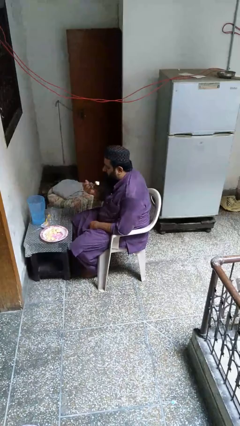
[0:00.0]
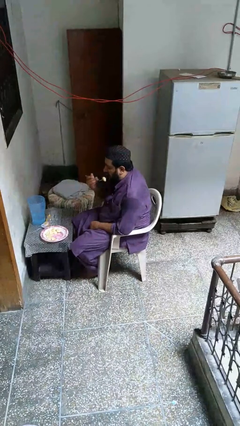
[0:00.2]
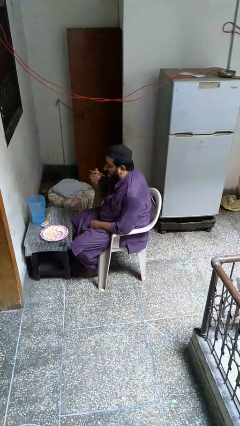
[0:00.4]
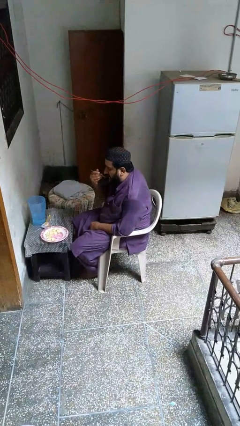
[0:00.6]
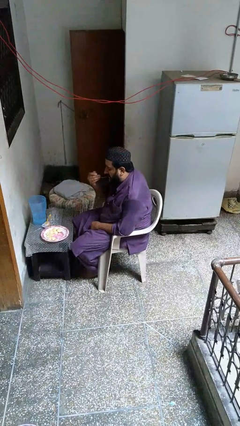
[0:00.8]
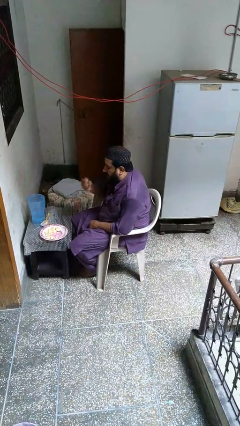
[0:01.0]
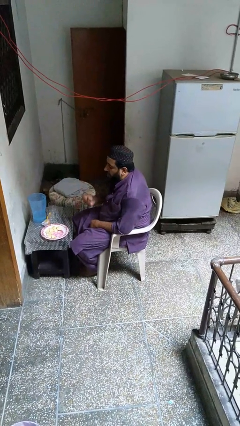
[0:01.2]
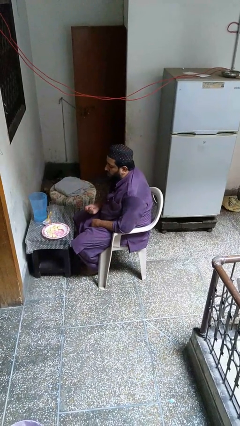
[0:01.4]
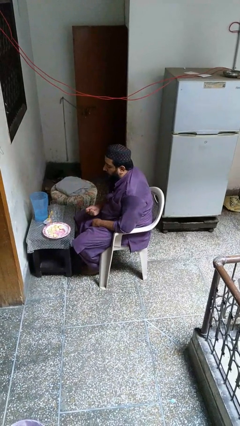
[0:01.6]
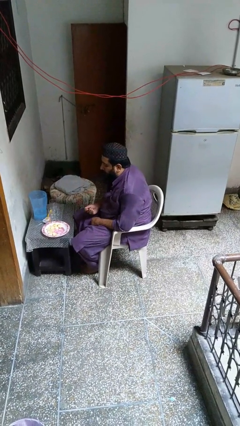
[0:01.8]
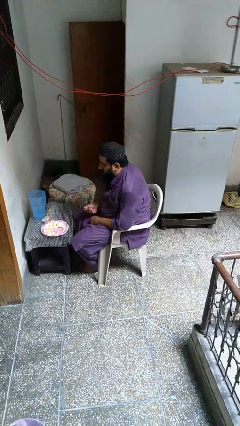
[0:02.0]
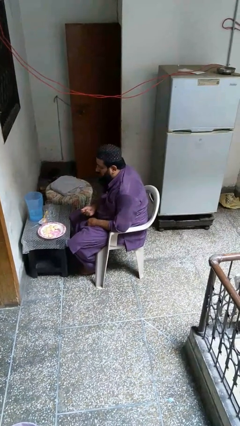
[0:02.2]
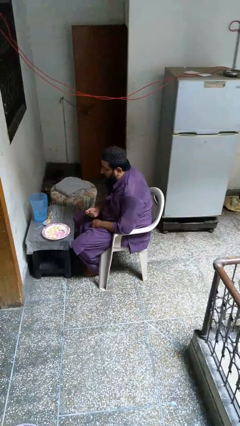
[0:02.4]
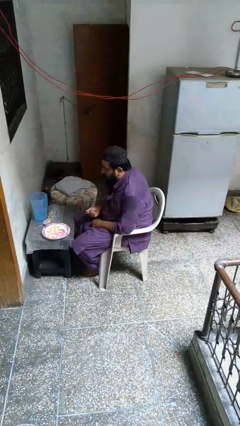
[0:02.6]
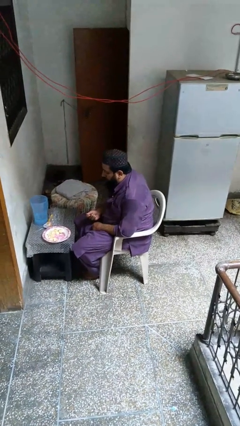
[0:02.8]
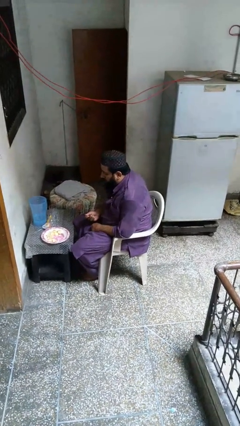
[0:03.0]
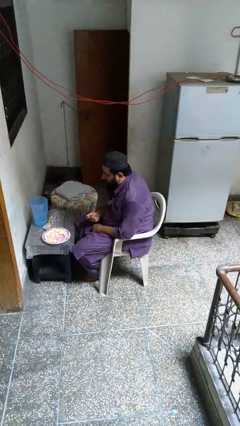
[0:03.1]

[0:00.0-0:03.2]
person eats with utensil

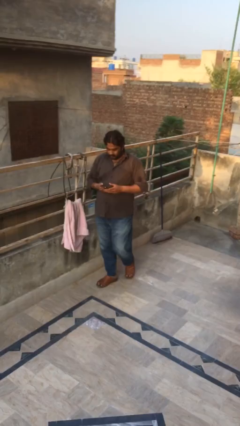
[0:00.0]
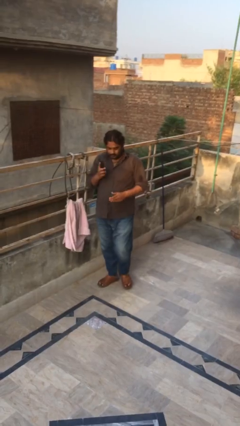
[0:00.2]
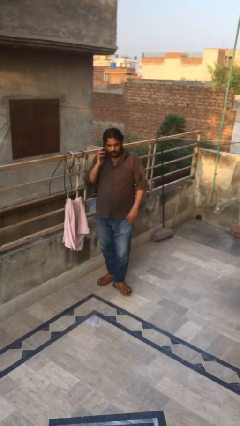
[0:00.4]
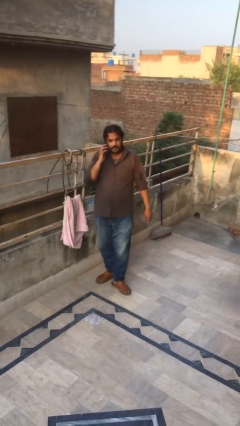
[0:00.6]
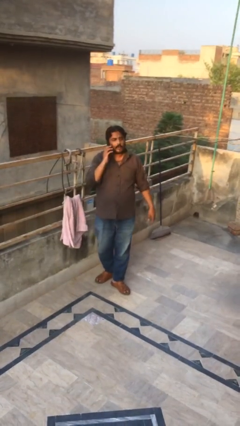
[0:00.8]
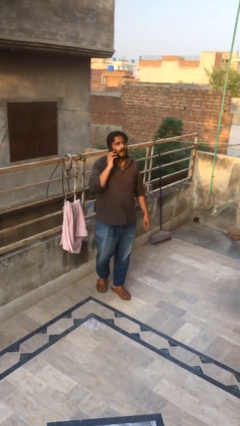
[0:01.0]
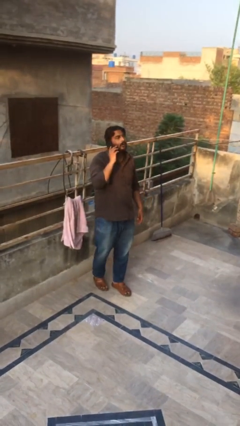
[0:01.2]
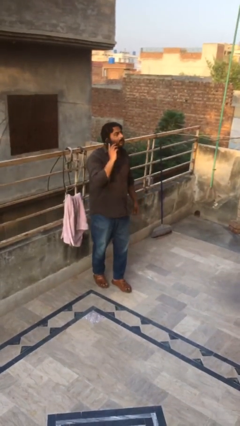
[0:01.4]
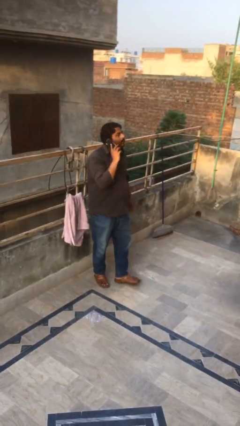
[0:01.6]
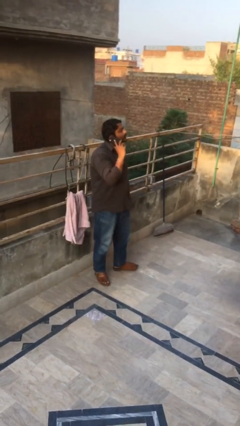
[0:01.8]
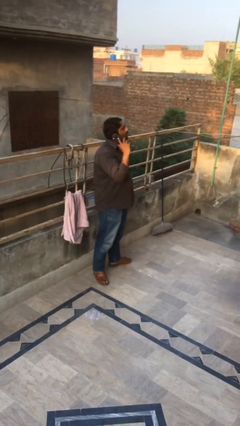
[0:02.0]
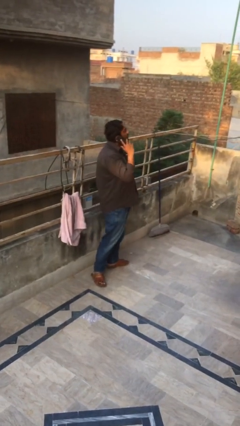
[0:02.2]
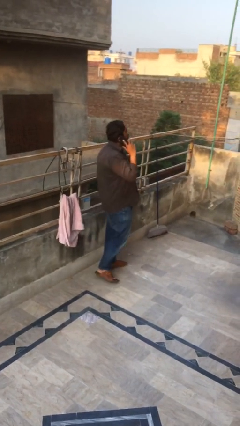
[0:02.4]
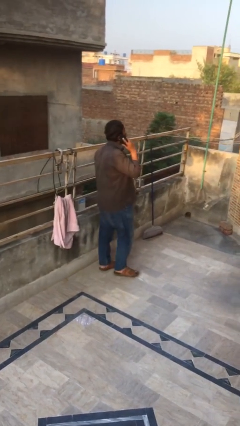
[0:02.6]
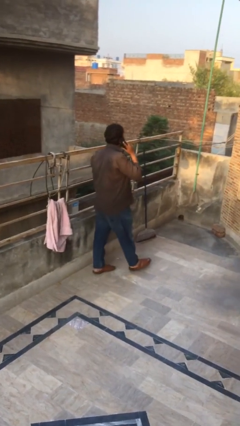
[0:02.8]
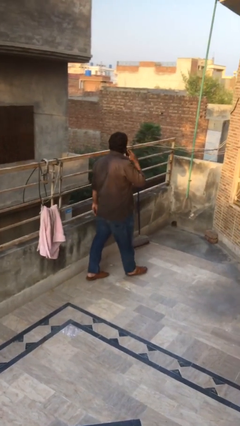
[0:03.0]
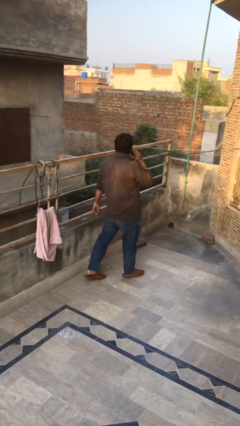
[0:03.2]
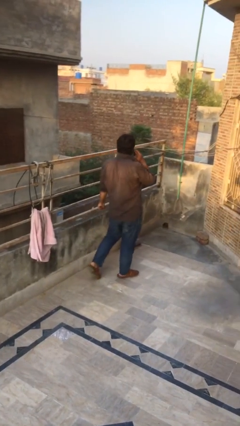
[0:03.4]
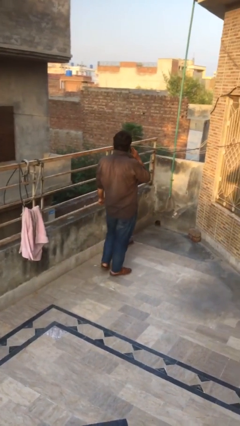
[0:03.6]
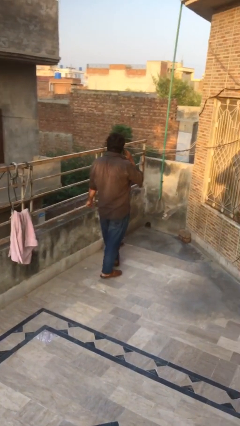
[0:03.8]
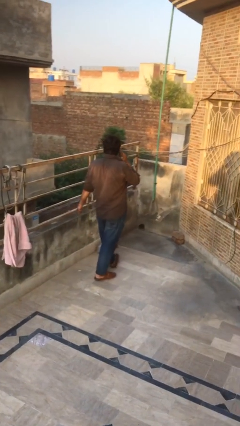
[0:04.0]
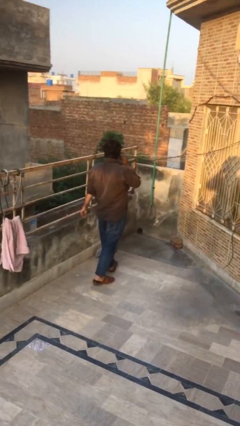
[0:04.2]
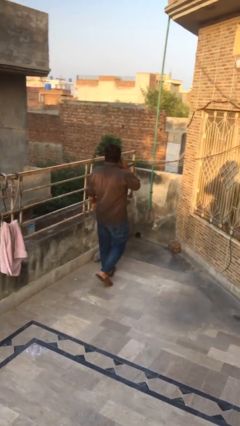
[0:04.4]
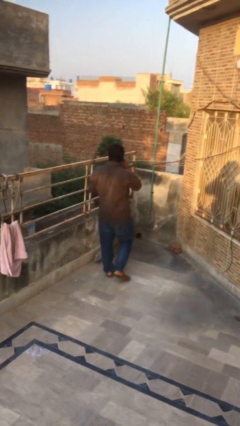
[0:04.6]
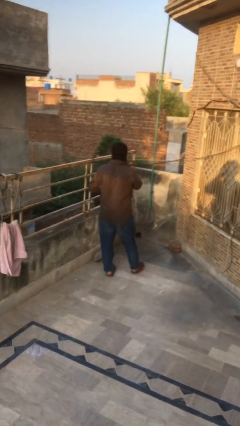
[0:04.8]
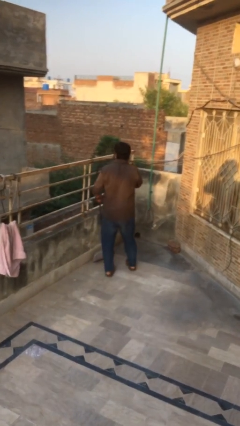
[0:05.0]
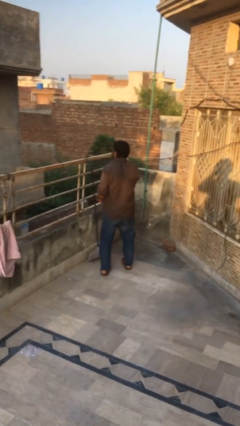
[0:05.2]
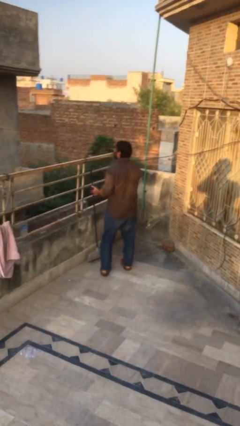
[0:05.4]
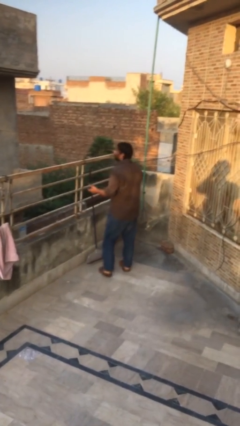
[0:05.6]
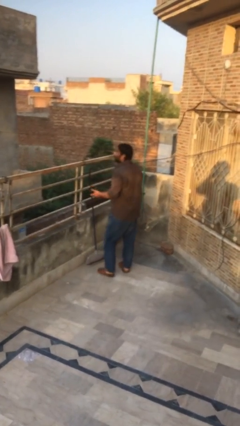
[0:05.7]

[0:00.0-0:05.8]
person talks on phone

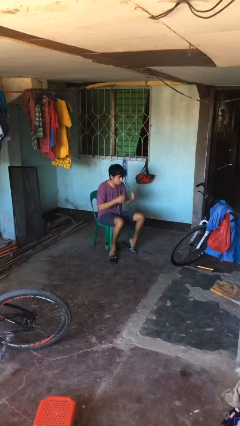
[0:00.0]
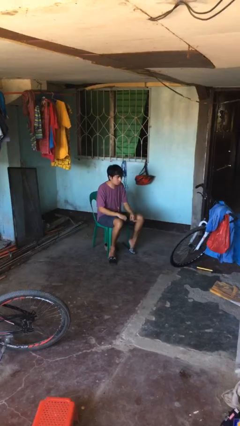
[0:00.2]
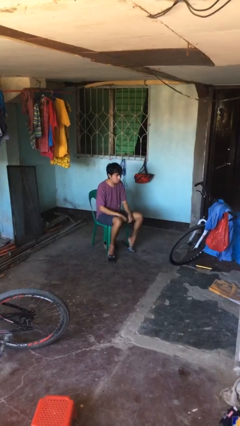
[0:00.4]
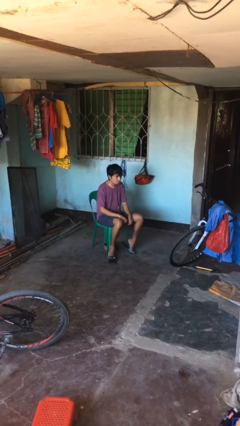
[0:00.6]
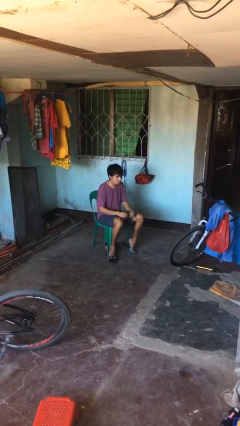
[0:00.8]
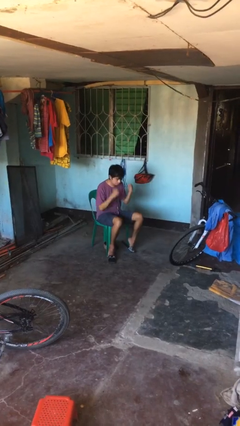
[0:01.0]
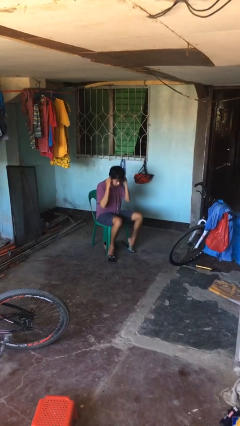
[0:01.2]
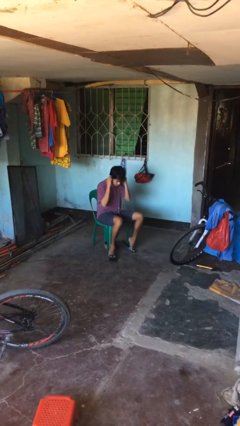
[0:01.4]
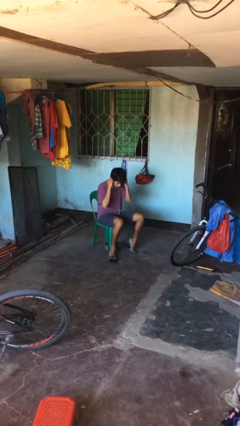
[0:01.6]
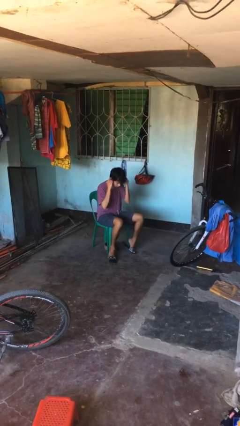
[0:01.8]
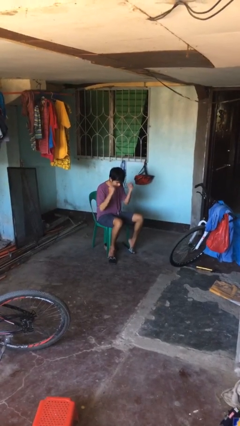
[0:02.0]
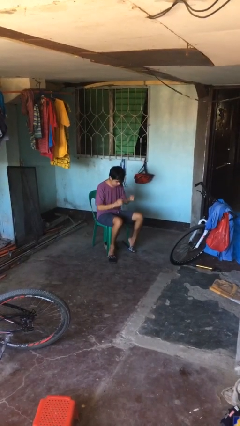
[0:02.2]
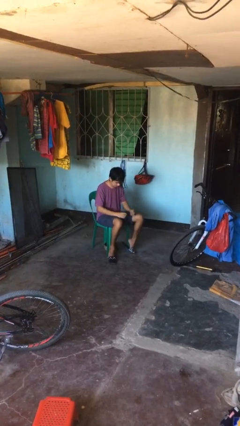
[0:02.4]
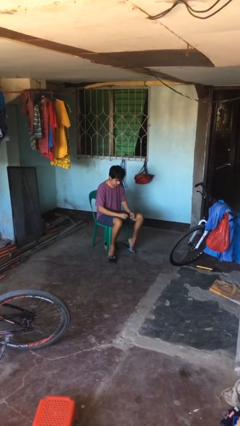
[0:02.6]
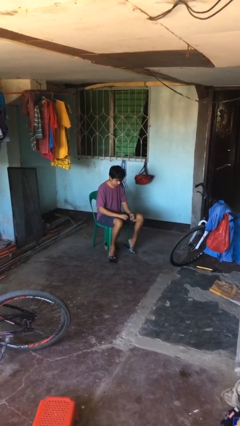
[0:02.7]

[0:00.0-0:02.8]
person takes off headphones

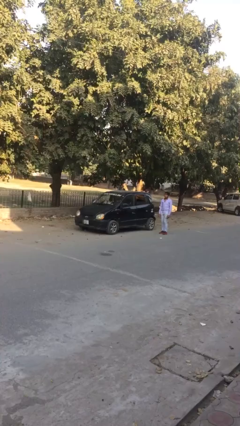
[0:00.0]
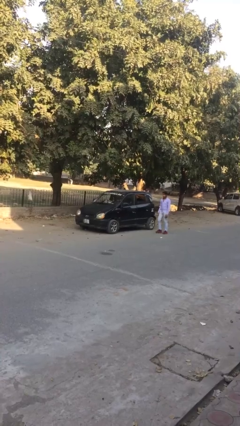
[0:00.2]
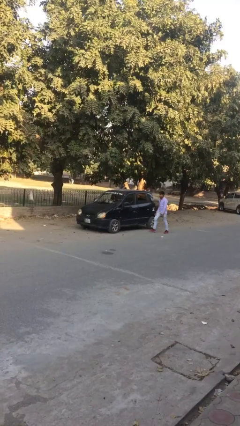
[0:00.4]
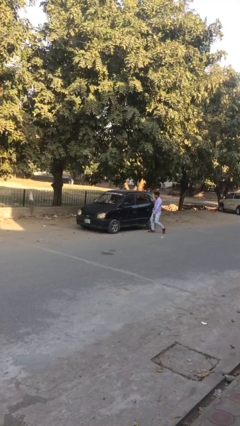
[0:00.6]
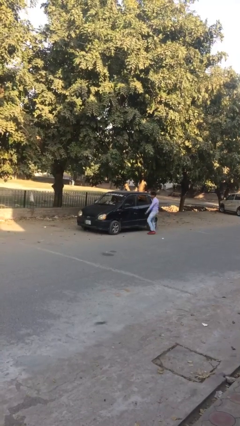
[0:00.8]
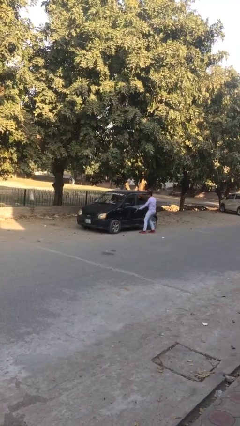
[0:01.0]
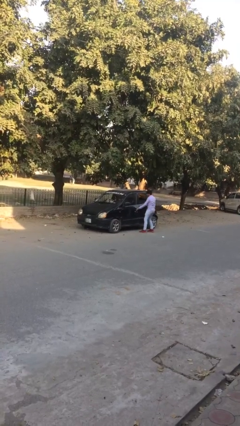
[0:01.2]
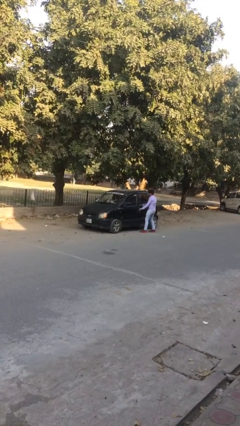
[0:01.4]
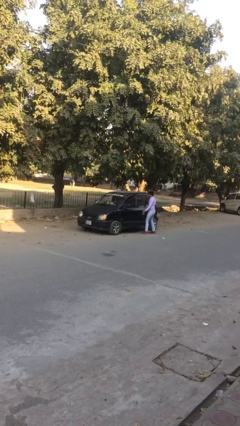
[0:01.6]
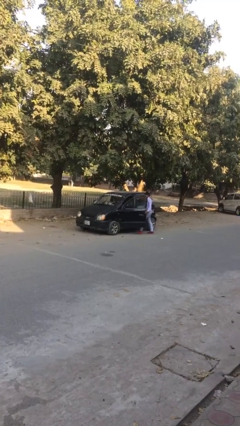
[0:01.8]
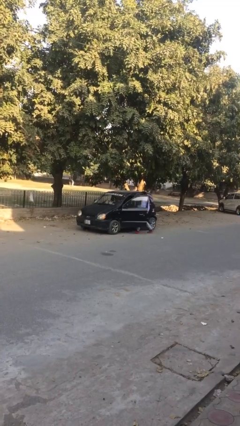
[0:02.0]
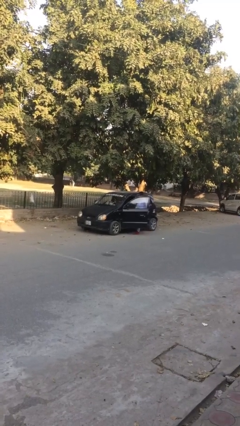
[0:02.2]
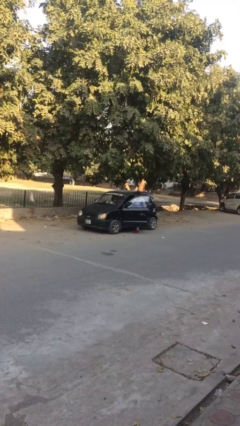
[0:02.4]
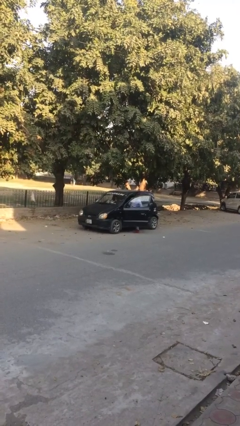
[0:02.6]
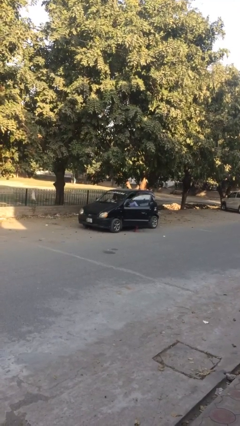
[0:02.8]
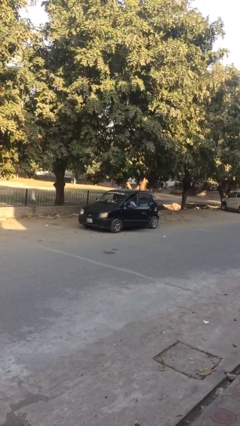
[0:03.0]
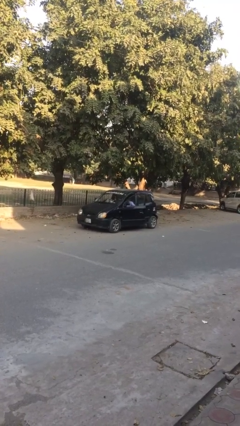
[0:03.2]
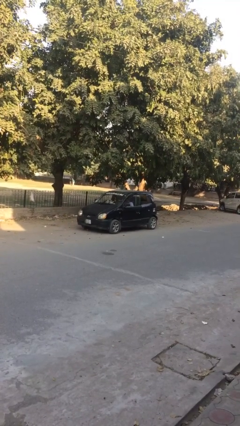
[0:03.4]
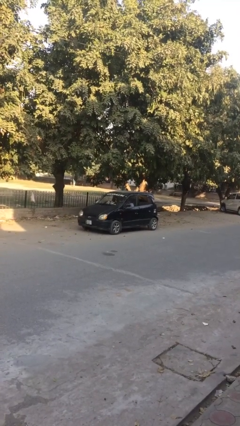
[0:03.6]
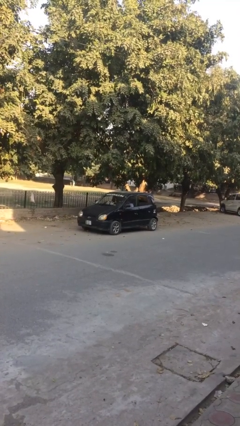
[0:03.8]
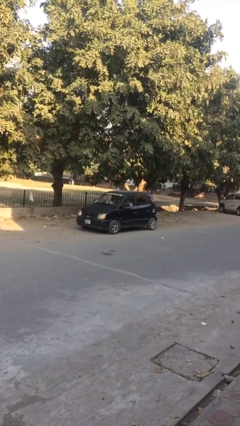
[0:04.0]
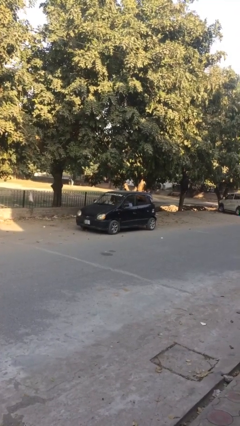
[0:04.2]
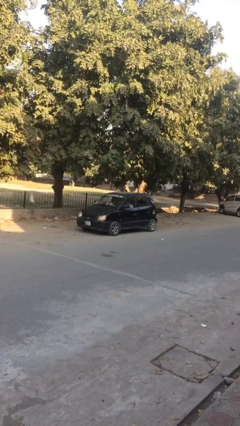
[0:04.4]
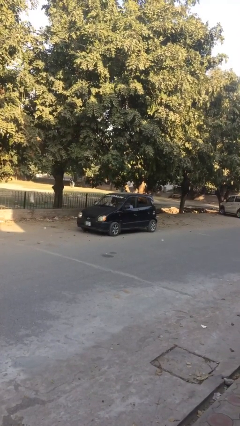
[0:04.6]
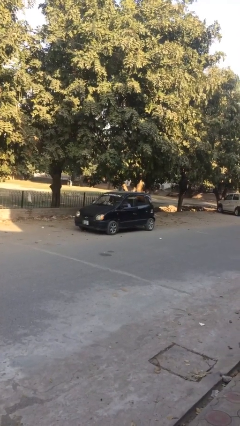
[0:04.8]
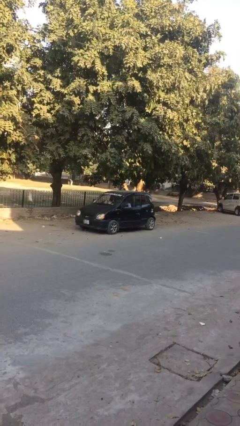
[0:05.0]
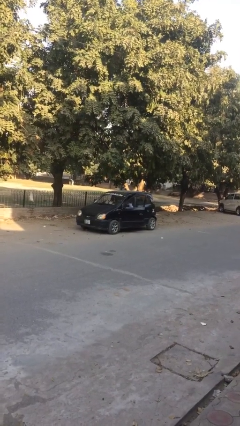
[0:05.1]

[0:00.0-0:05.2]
car picks up person

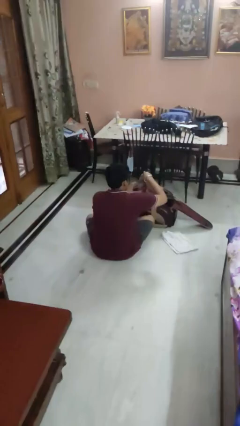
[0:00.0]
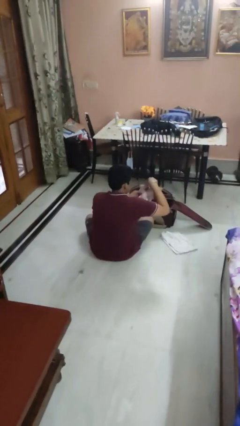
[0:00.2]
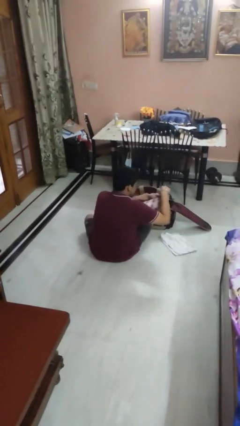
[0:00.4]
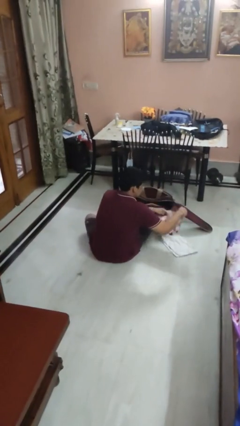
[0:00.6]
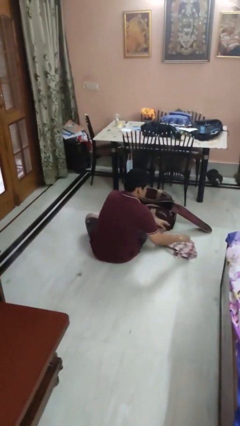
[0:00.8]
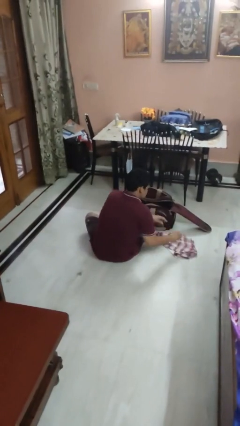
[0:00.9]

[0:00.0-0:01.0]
person unloads clothes from suitcase
